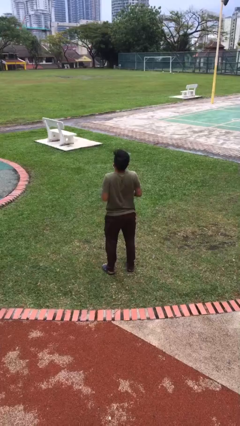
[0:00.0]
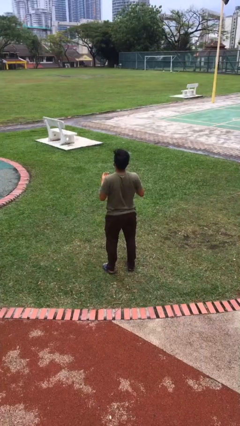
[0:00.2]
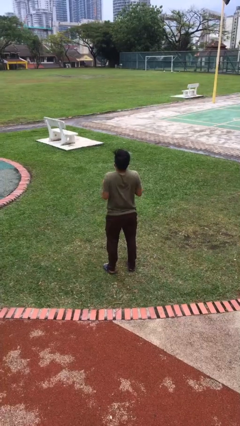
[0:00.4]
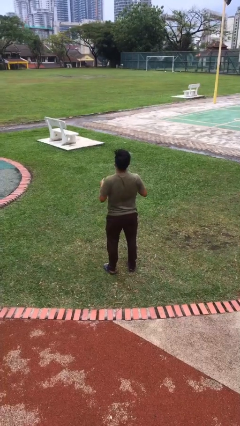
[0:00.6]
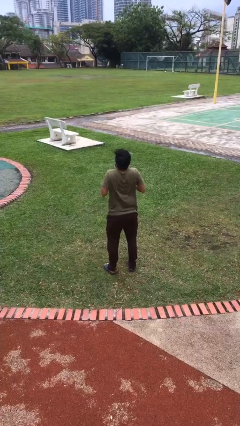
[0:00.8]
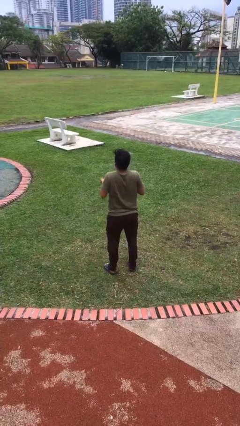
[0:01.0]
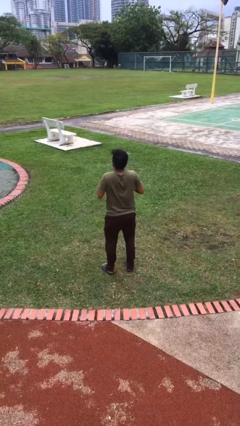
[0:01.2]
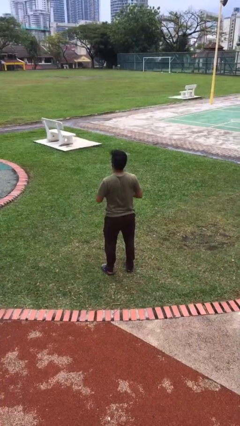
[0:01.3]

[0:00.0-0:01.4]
person shrugs

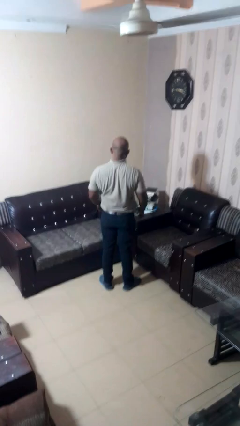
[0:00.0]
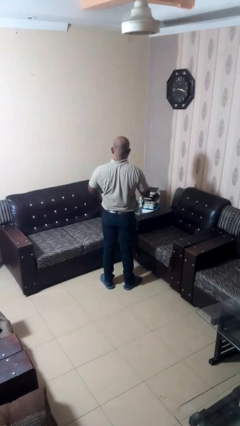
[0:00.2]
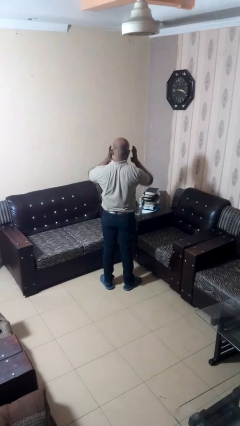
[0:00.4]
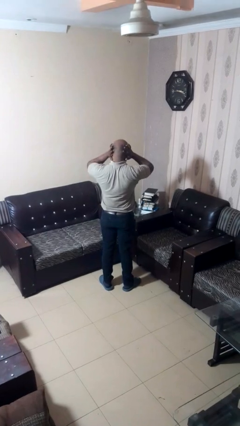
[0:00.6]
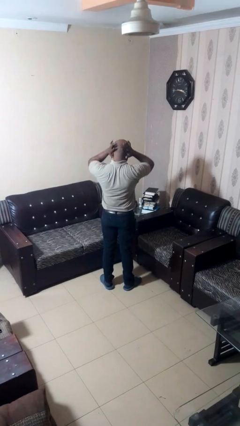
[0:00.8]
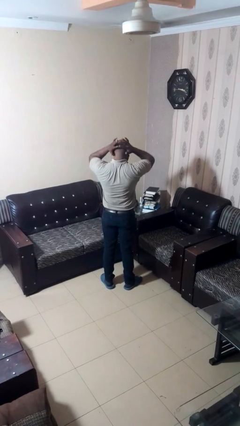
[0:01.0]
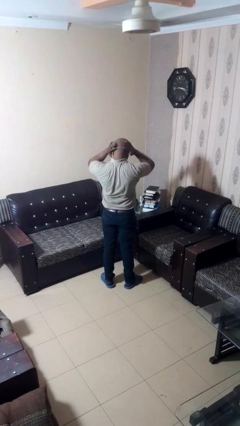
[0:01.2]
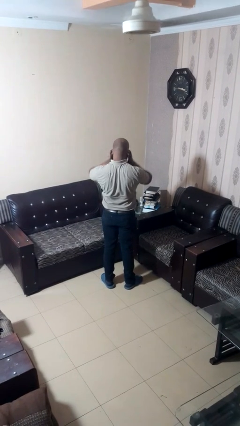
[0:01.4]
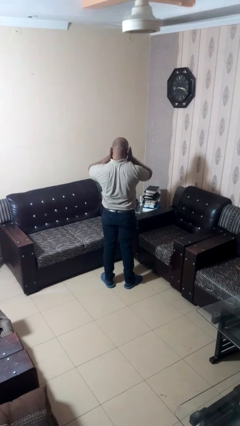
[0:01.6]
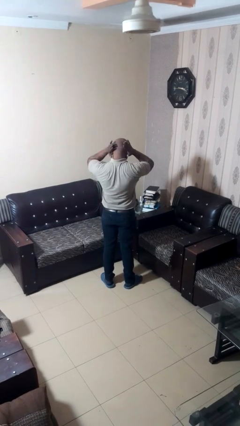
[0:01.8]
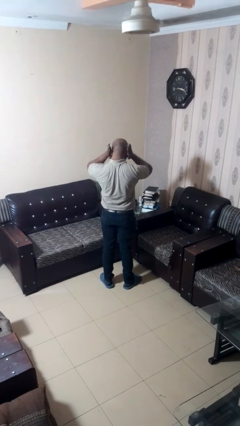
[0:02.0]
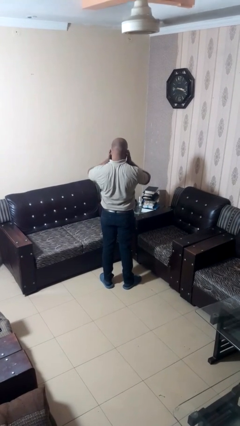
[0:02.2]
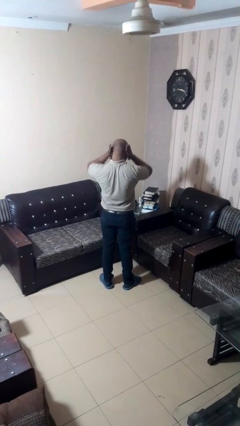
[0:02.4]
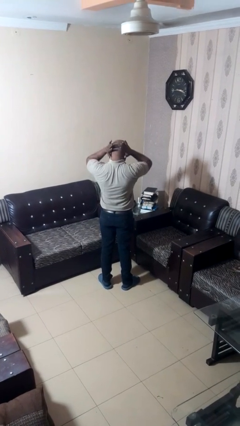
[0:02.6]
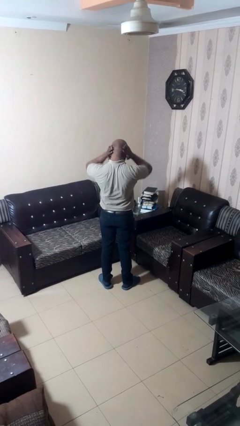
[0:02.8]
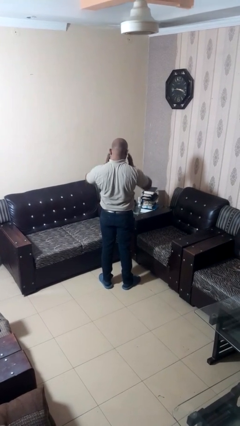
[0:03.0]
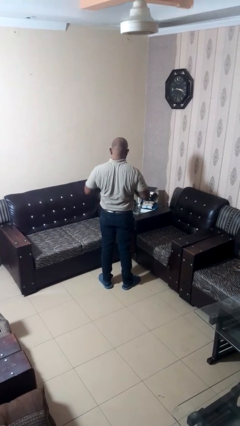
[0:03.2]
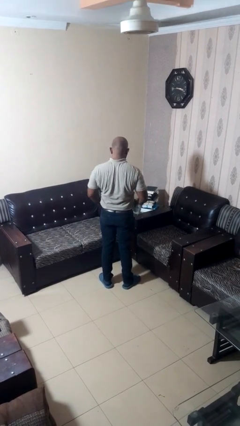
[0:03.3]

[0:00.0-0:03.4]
person touches earlobe

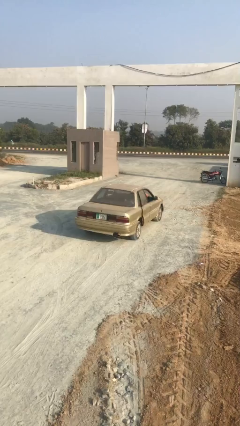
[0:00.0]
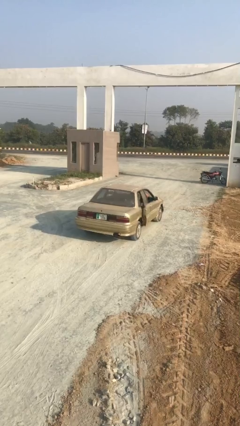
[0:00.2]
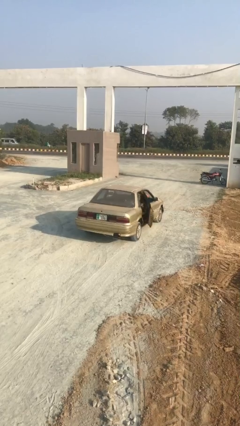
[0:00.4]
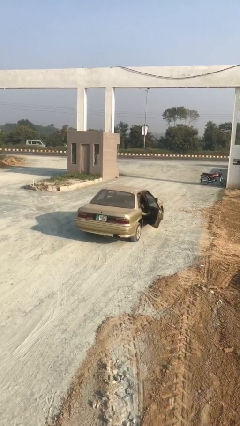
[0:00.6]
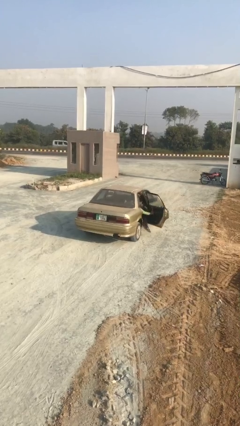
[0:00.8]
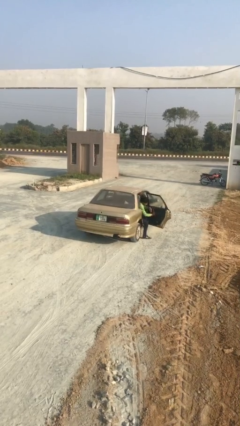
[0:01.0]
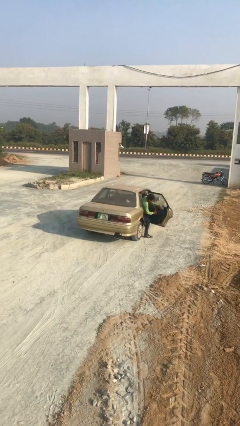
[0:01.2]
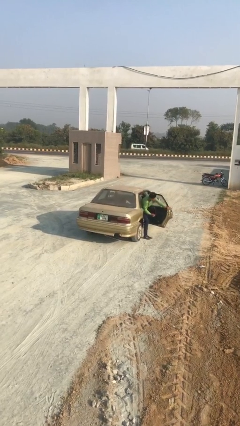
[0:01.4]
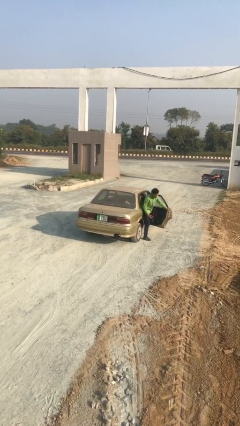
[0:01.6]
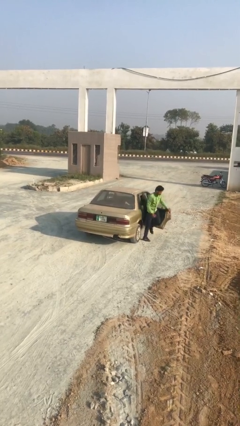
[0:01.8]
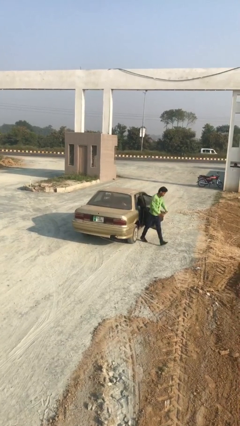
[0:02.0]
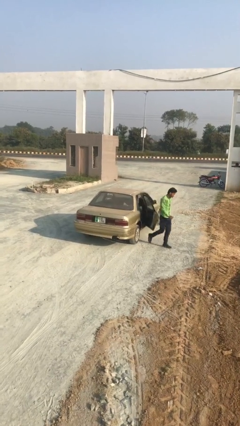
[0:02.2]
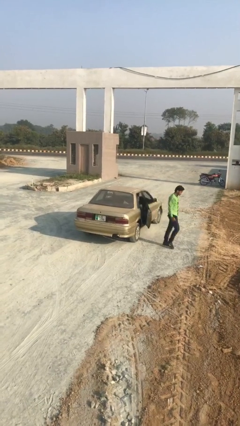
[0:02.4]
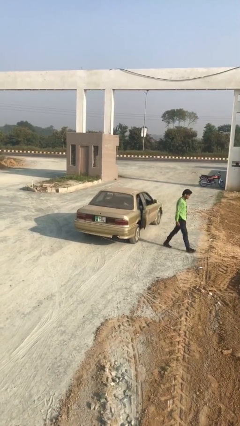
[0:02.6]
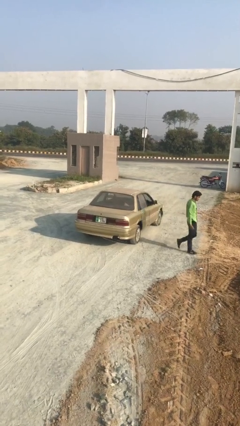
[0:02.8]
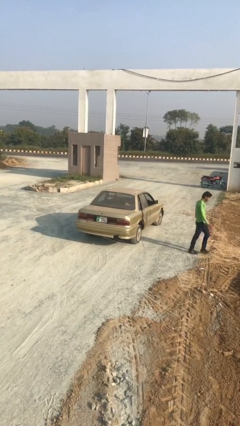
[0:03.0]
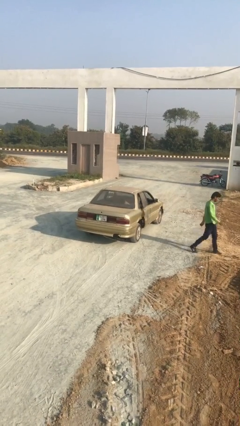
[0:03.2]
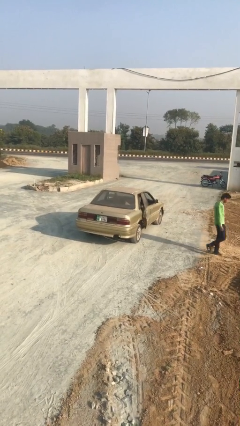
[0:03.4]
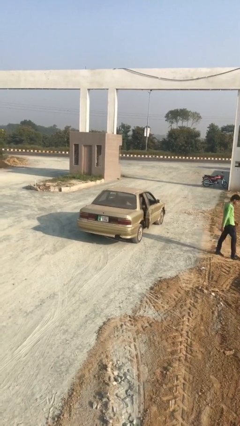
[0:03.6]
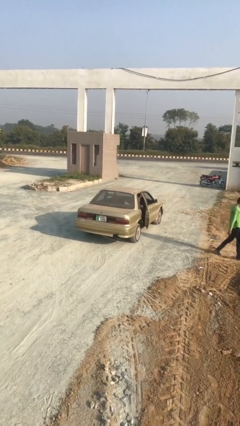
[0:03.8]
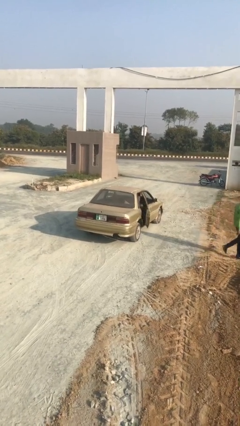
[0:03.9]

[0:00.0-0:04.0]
car drops off person

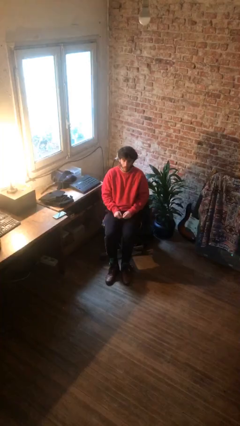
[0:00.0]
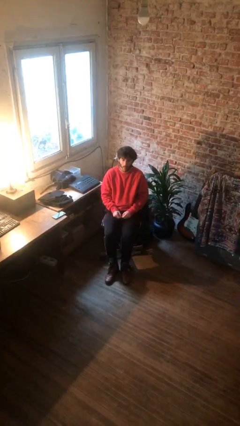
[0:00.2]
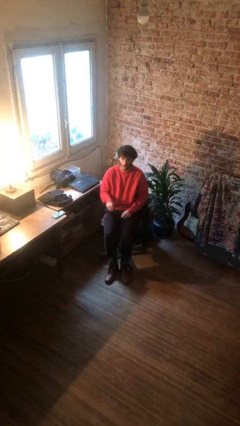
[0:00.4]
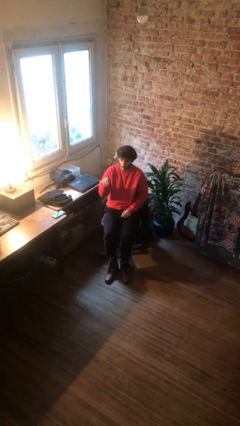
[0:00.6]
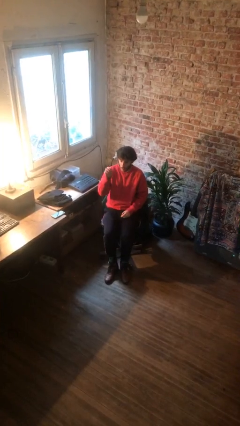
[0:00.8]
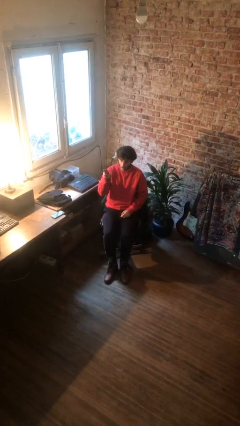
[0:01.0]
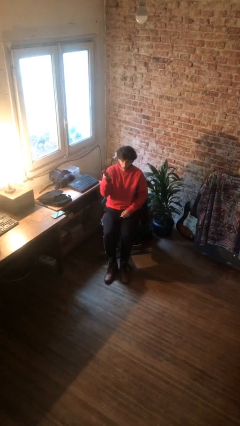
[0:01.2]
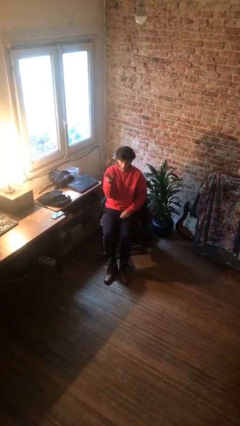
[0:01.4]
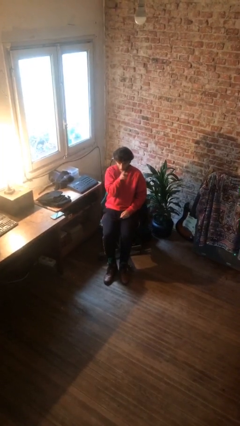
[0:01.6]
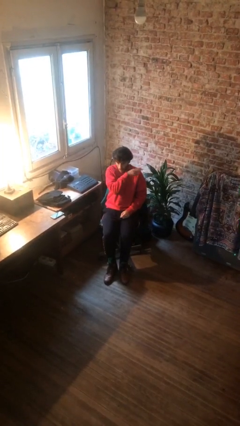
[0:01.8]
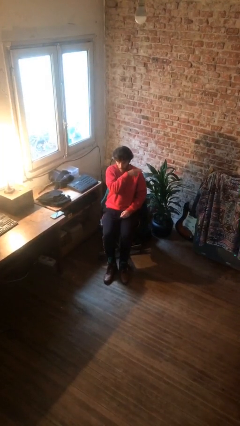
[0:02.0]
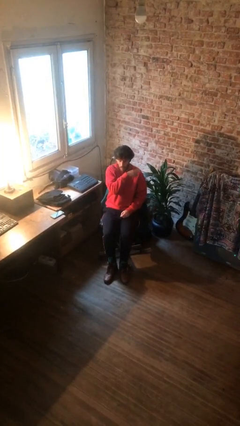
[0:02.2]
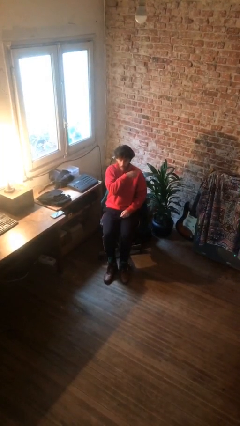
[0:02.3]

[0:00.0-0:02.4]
person gestures swipe left

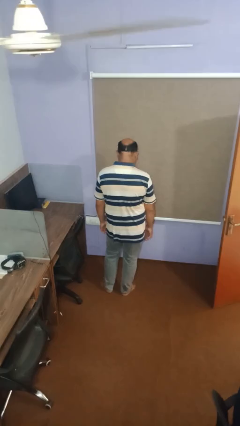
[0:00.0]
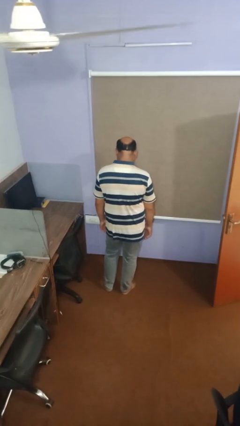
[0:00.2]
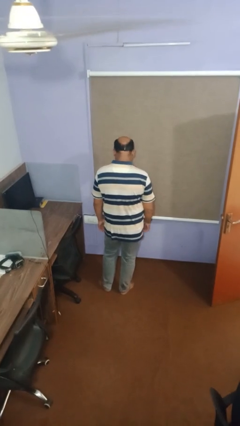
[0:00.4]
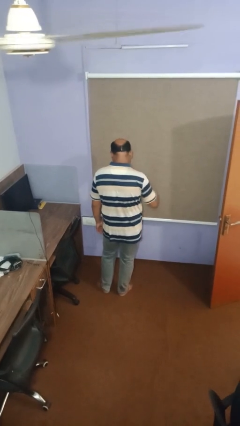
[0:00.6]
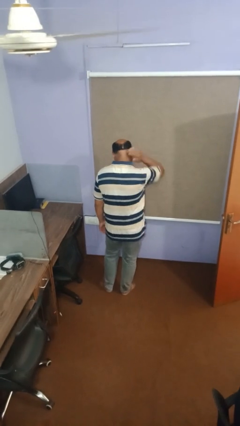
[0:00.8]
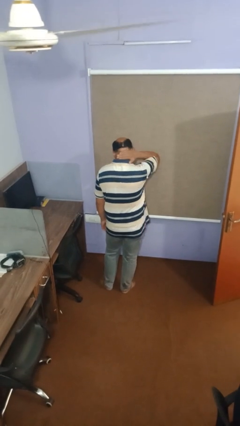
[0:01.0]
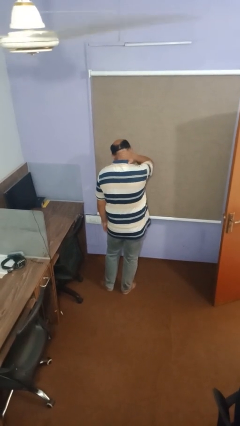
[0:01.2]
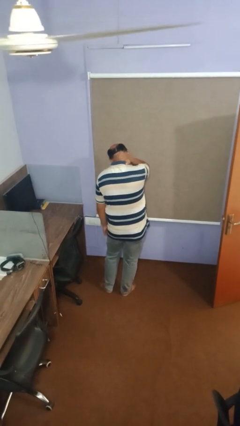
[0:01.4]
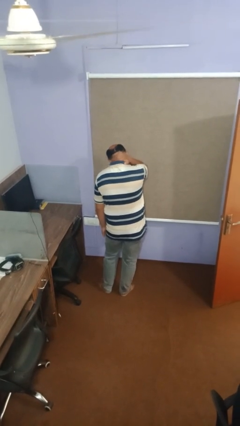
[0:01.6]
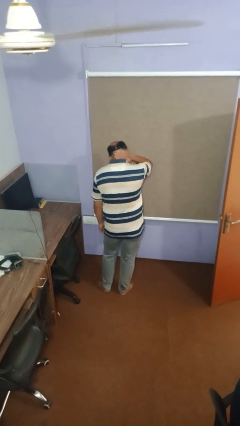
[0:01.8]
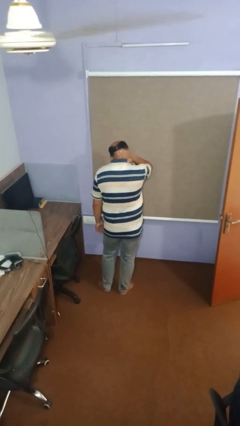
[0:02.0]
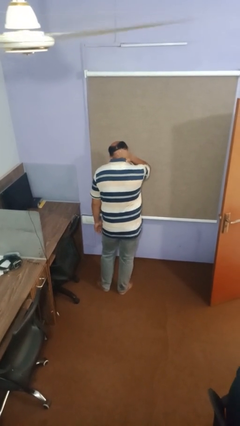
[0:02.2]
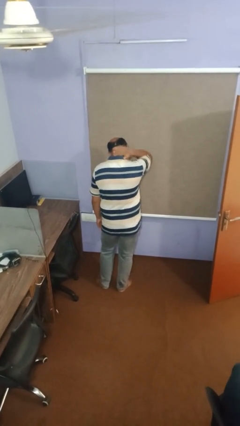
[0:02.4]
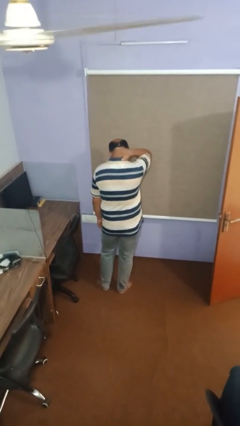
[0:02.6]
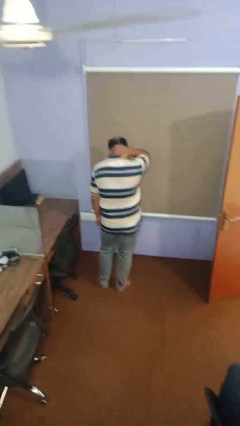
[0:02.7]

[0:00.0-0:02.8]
person cracks knuckles

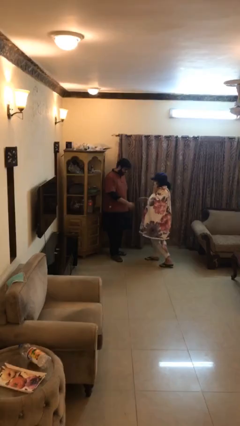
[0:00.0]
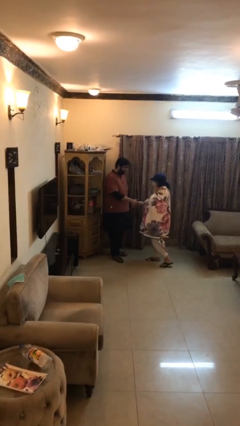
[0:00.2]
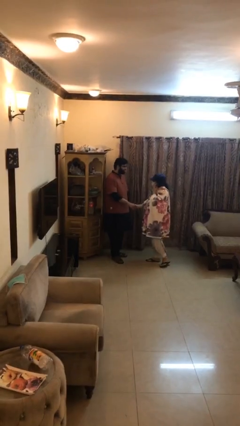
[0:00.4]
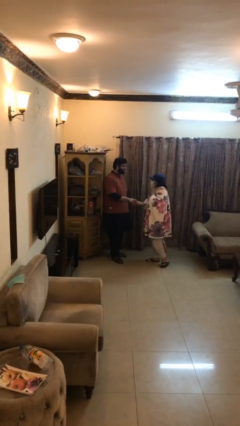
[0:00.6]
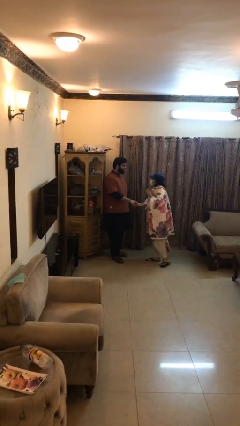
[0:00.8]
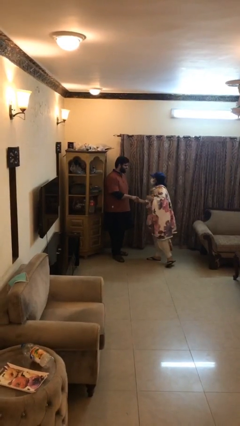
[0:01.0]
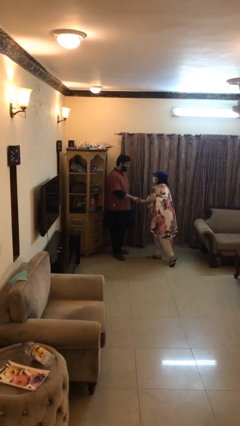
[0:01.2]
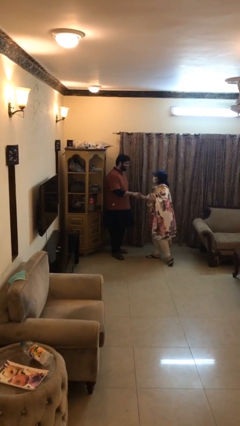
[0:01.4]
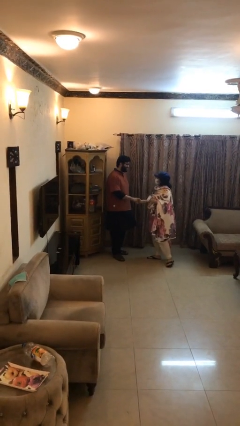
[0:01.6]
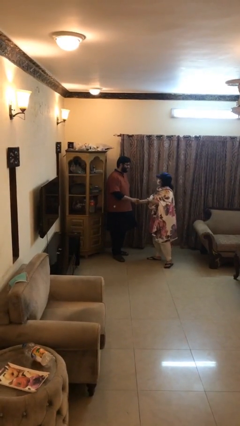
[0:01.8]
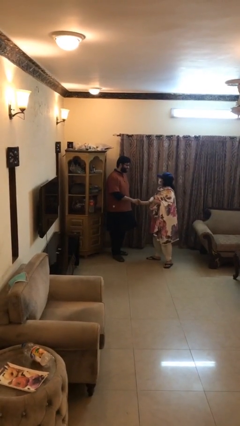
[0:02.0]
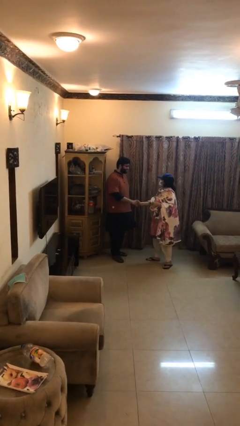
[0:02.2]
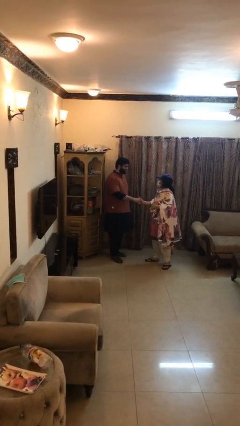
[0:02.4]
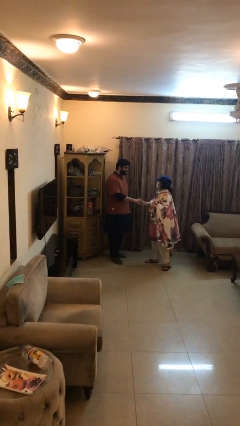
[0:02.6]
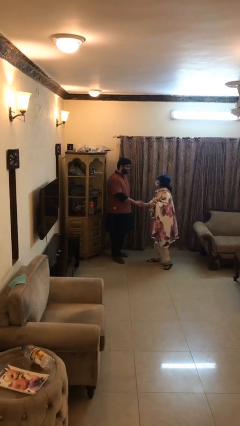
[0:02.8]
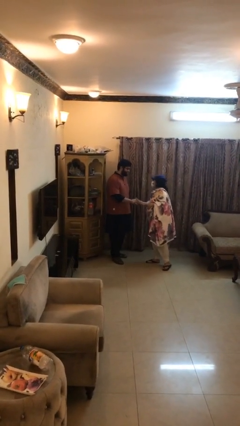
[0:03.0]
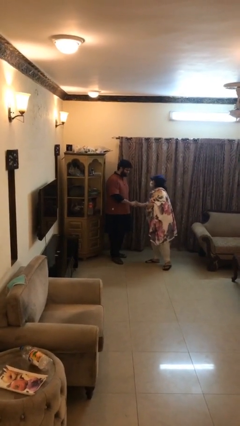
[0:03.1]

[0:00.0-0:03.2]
person shakes hand
